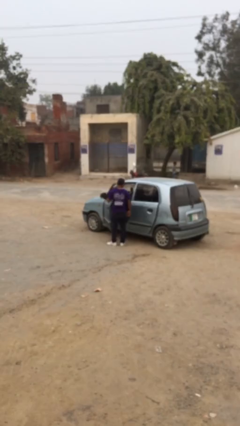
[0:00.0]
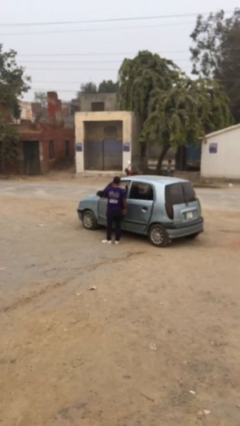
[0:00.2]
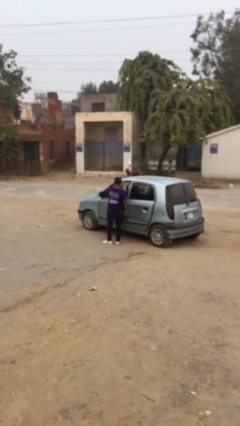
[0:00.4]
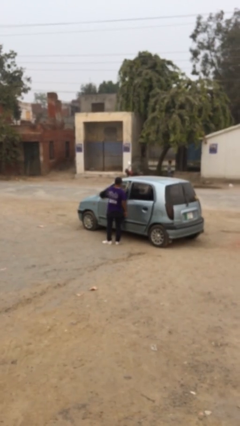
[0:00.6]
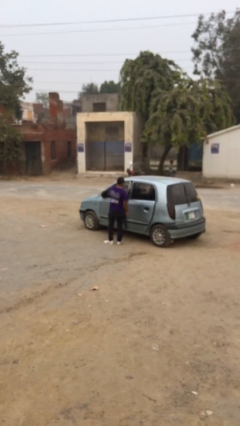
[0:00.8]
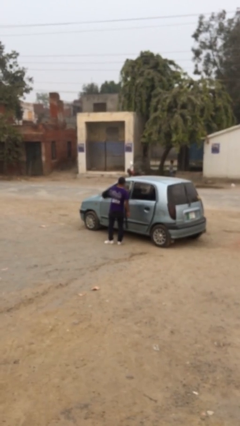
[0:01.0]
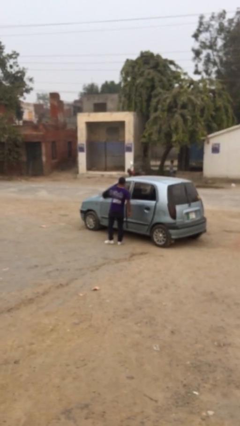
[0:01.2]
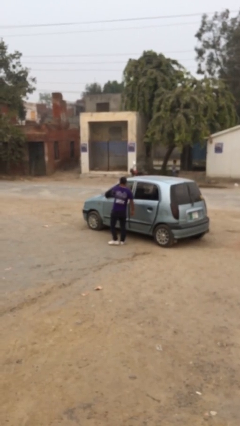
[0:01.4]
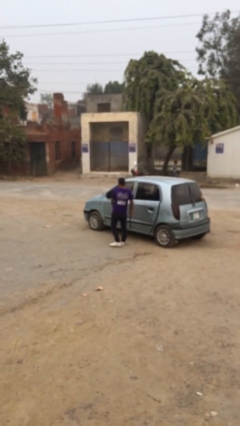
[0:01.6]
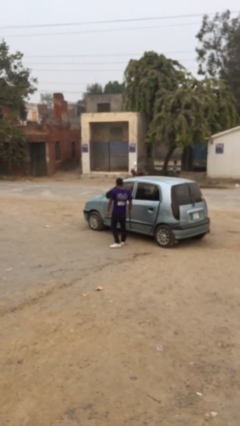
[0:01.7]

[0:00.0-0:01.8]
person closes car door

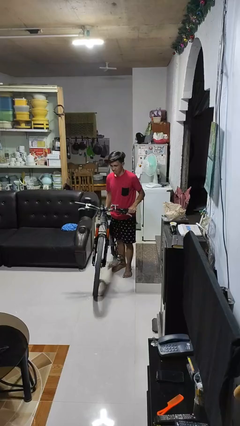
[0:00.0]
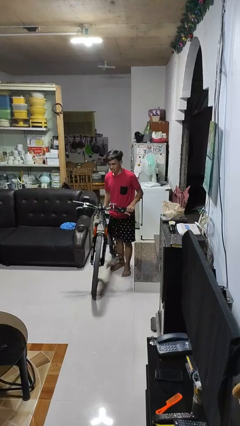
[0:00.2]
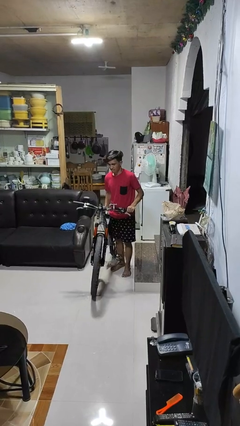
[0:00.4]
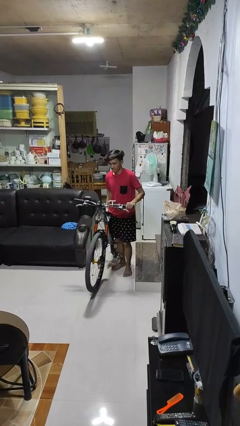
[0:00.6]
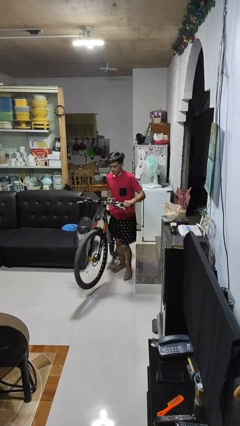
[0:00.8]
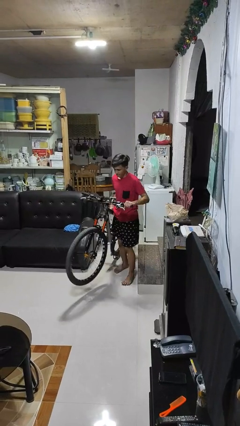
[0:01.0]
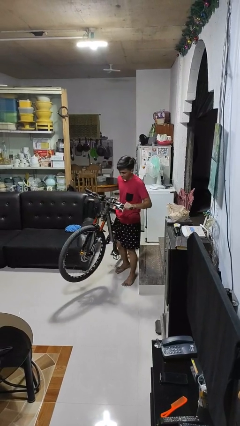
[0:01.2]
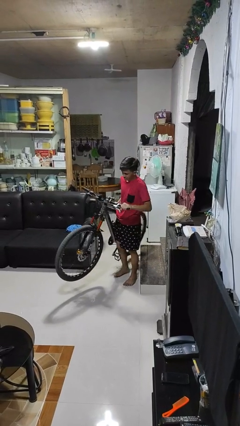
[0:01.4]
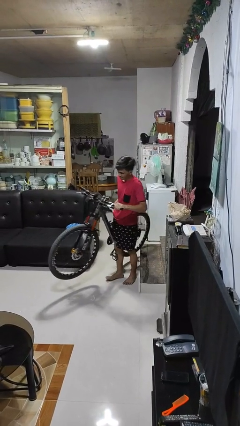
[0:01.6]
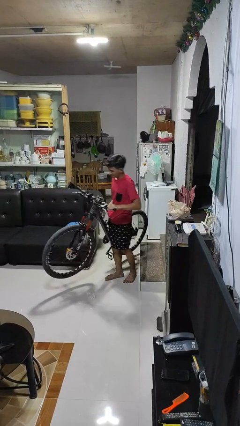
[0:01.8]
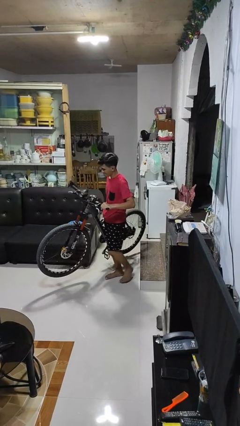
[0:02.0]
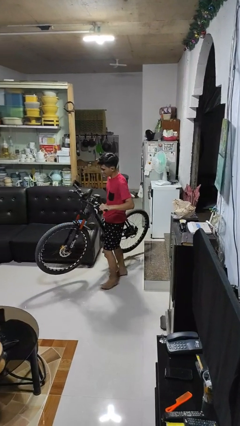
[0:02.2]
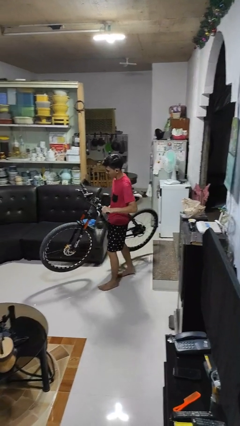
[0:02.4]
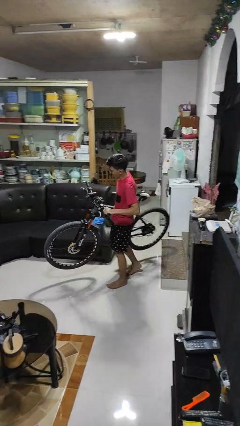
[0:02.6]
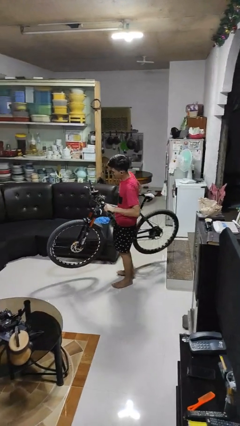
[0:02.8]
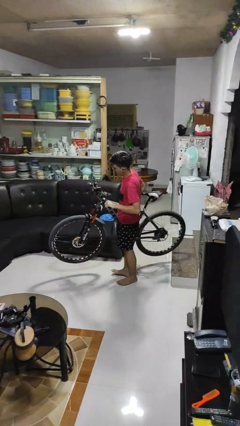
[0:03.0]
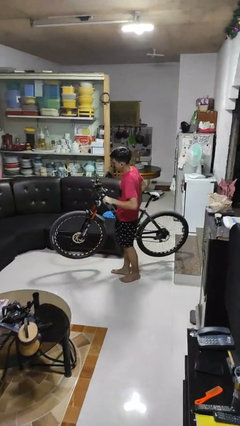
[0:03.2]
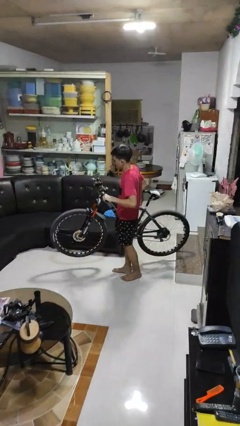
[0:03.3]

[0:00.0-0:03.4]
person carries bicycle

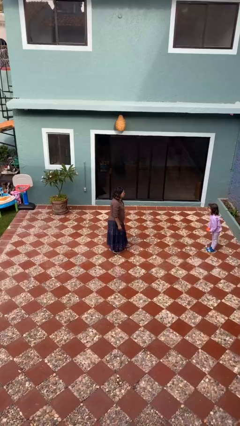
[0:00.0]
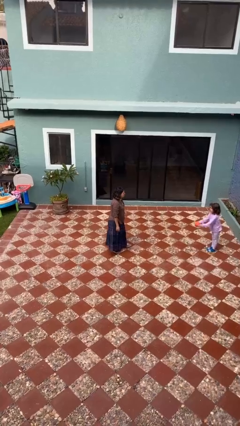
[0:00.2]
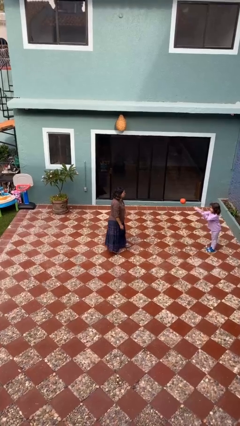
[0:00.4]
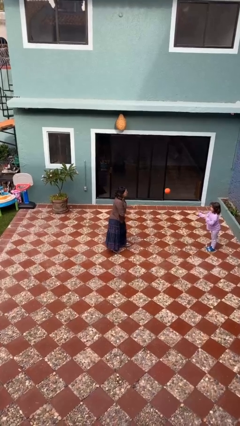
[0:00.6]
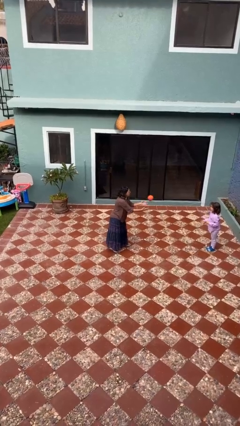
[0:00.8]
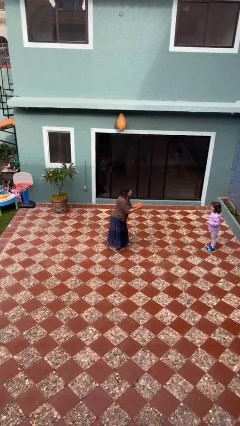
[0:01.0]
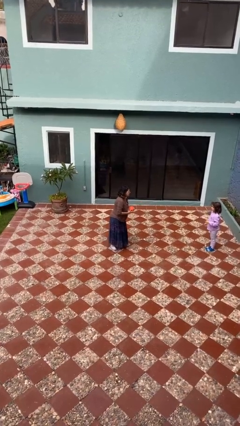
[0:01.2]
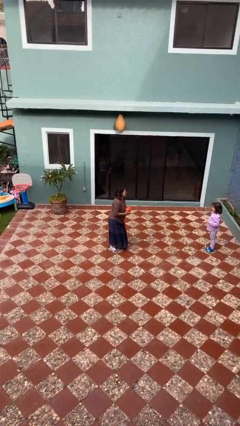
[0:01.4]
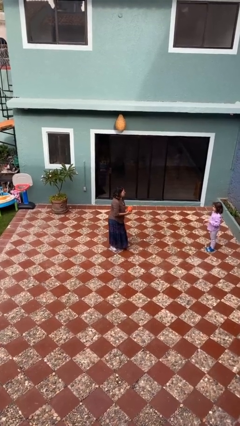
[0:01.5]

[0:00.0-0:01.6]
person catches object from person

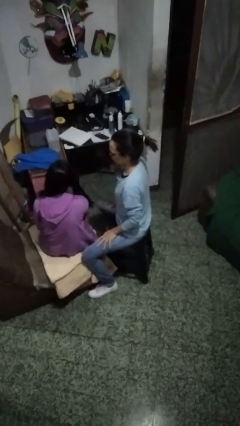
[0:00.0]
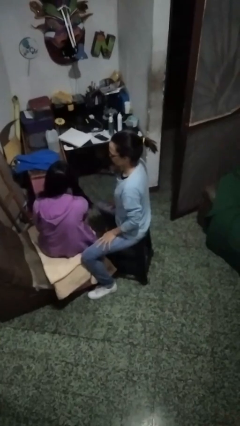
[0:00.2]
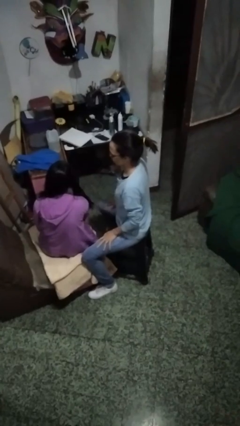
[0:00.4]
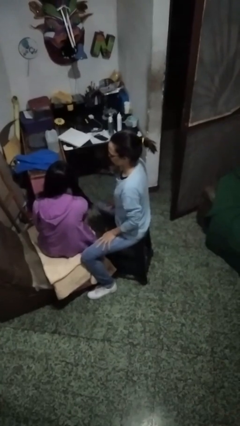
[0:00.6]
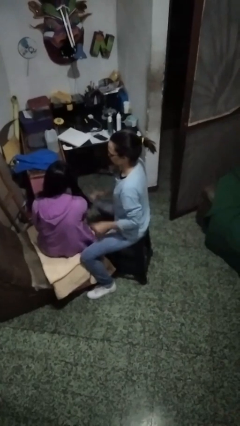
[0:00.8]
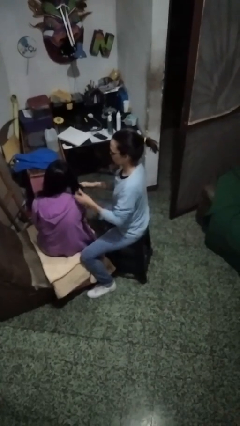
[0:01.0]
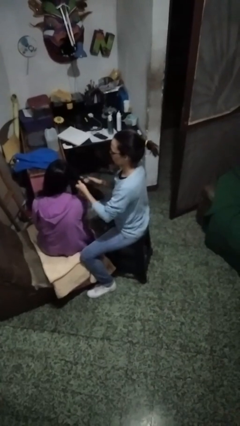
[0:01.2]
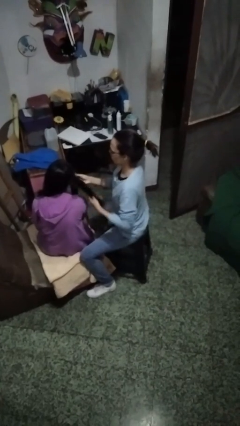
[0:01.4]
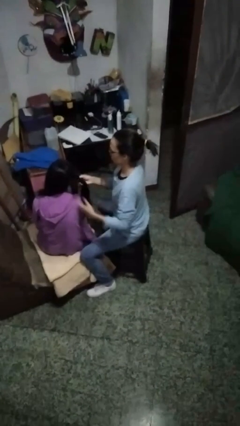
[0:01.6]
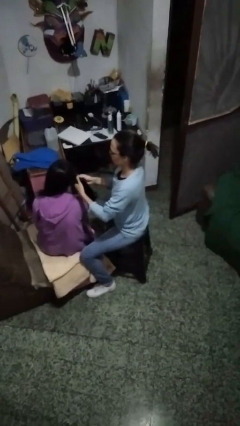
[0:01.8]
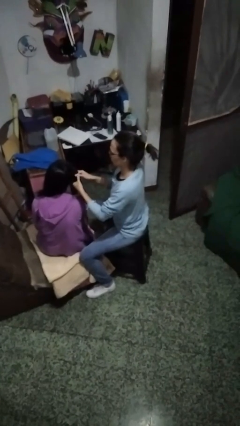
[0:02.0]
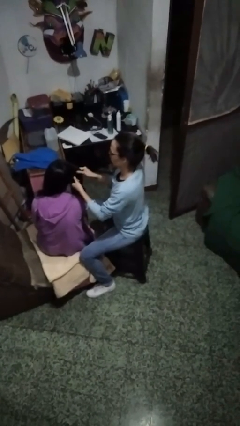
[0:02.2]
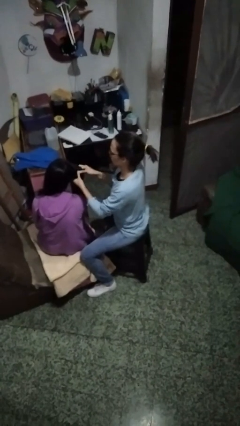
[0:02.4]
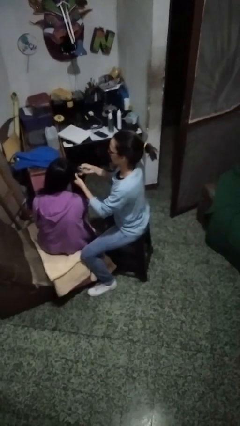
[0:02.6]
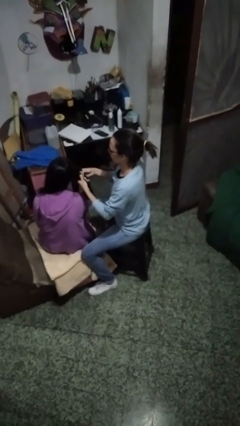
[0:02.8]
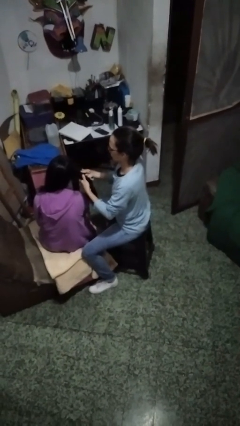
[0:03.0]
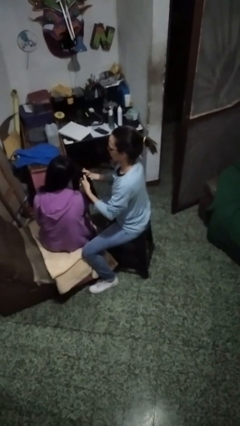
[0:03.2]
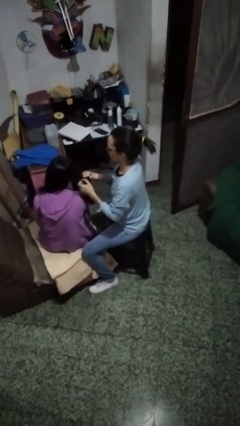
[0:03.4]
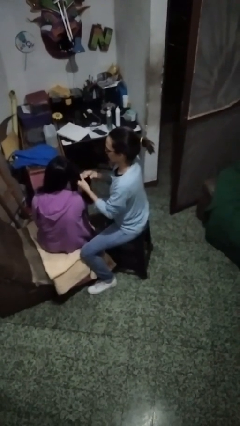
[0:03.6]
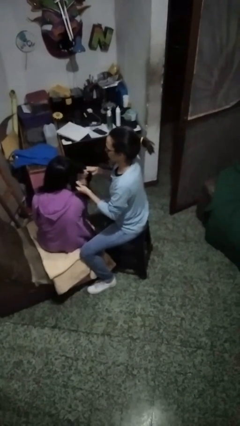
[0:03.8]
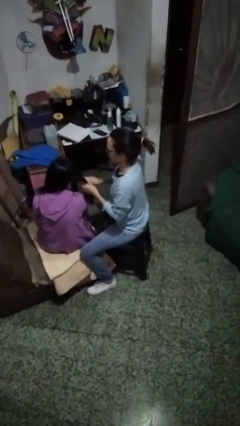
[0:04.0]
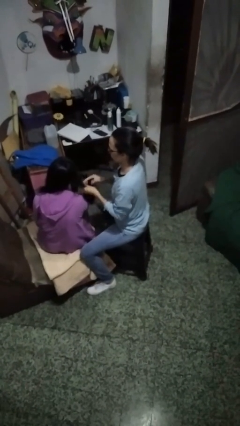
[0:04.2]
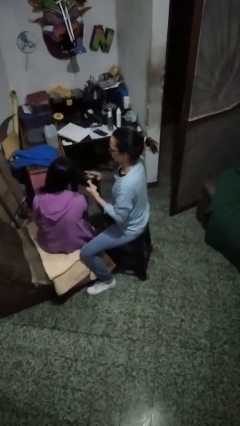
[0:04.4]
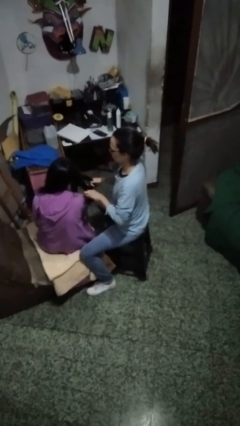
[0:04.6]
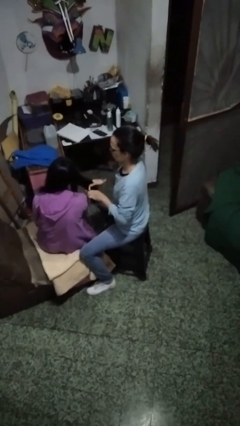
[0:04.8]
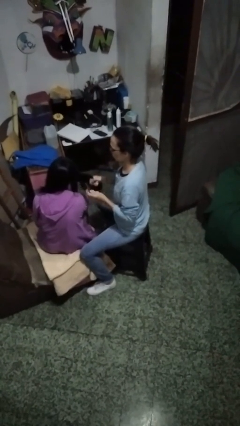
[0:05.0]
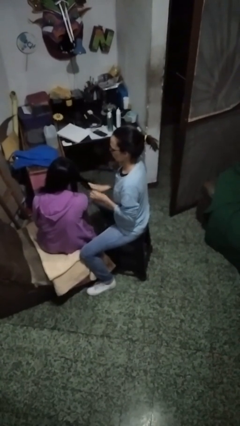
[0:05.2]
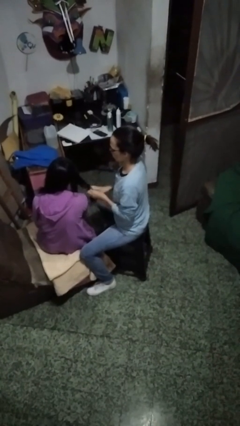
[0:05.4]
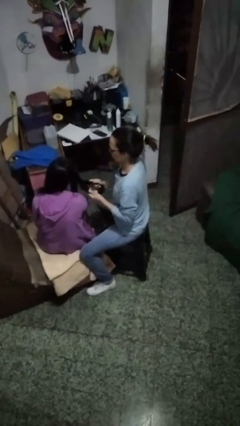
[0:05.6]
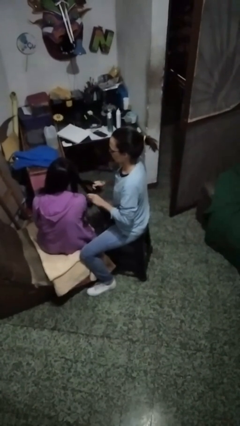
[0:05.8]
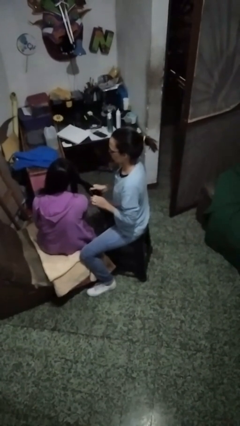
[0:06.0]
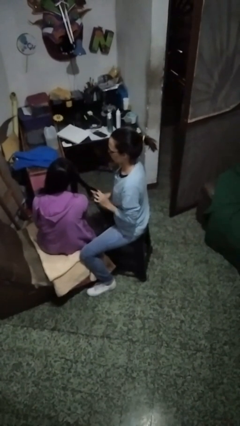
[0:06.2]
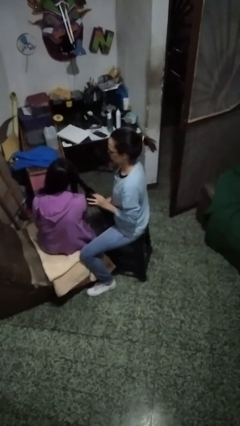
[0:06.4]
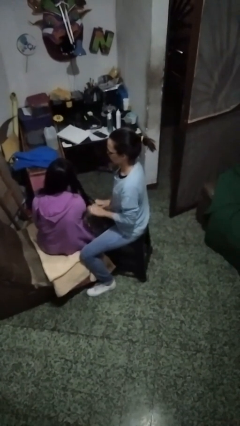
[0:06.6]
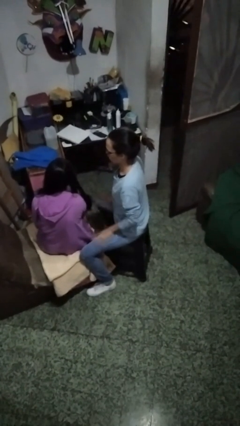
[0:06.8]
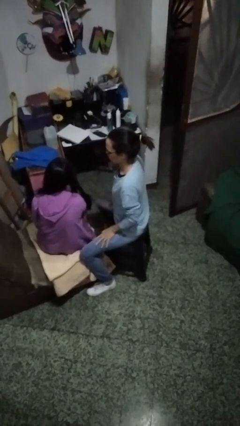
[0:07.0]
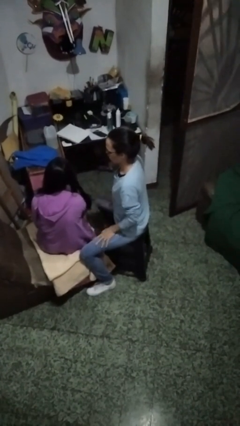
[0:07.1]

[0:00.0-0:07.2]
person braids hair of person

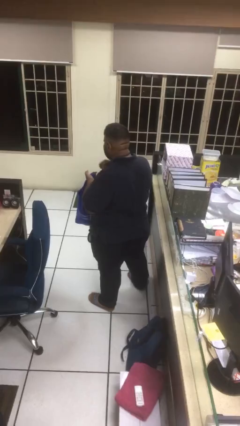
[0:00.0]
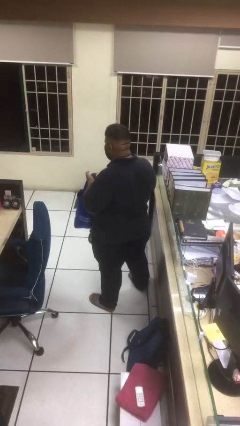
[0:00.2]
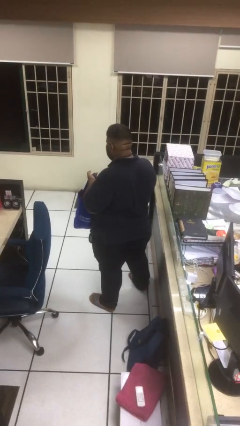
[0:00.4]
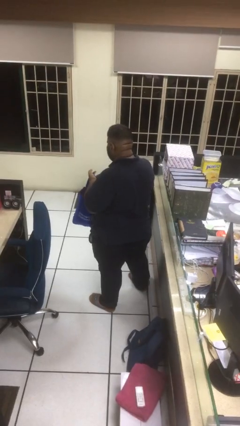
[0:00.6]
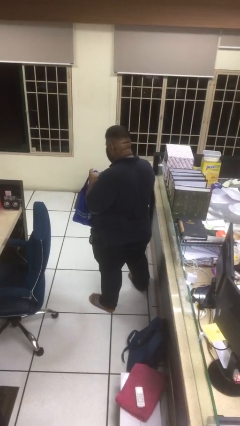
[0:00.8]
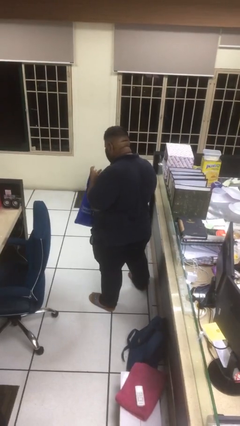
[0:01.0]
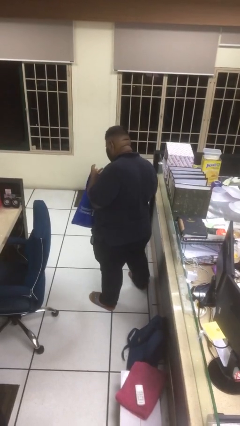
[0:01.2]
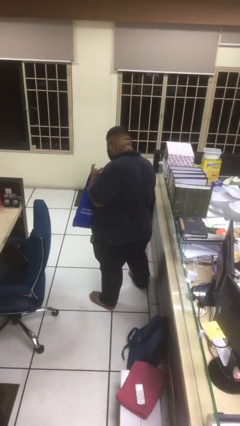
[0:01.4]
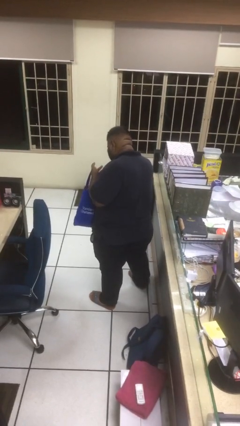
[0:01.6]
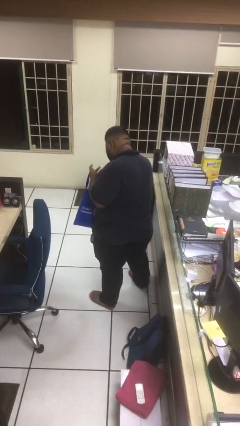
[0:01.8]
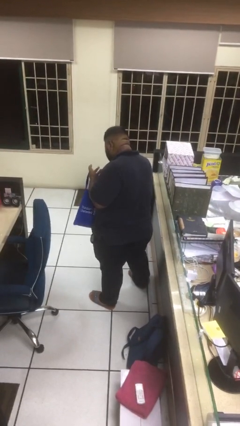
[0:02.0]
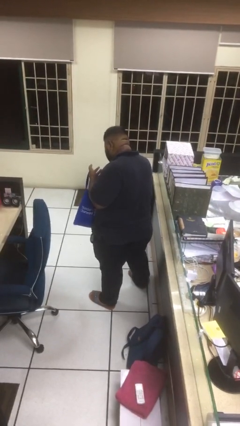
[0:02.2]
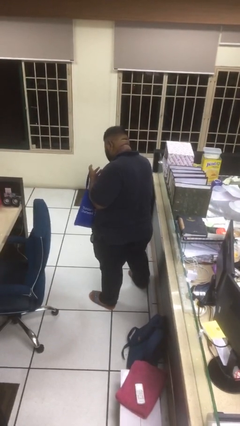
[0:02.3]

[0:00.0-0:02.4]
person searches in bag

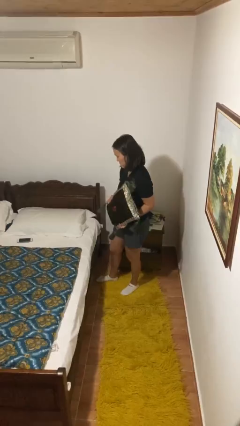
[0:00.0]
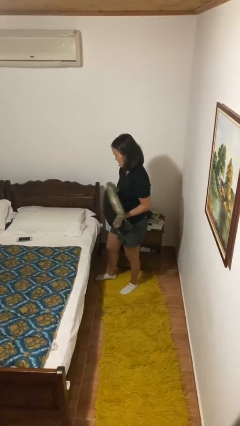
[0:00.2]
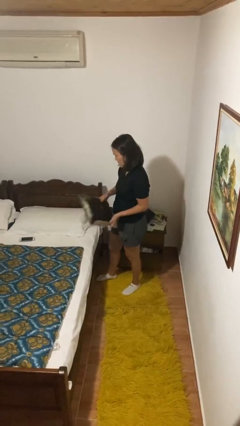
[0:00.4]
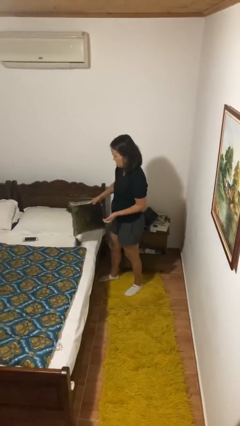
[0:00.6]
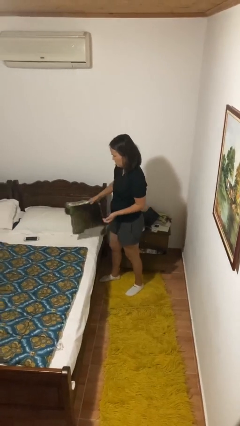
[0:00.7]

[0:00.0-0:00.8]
person puts down object on bed
